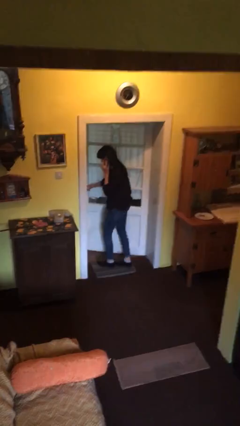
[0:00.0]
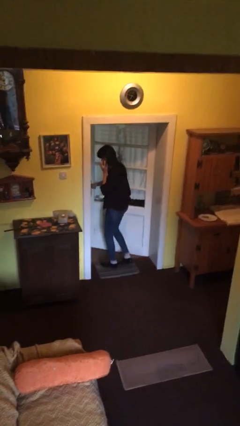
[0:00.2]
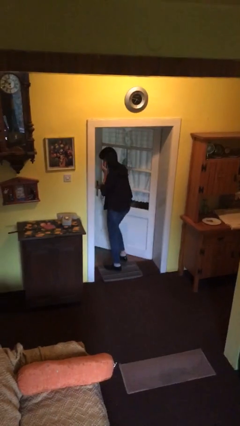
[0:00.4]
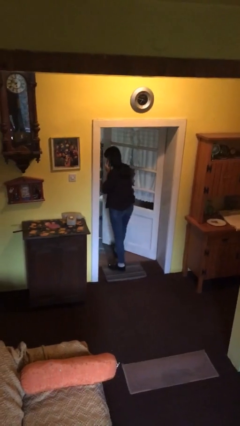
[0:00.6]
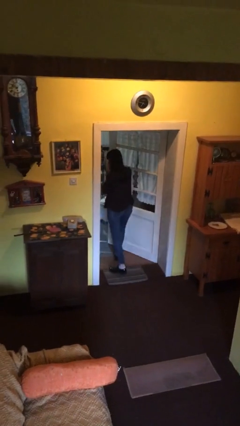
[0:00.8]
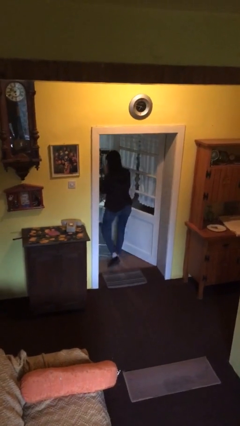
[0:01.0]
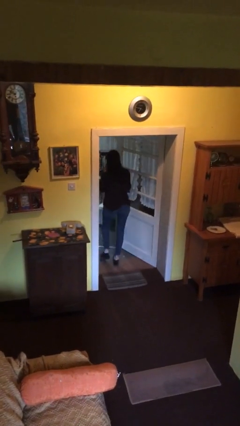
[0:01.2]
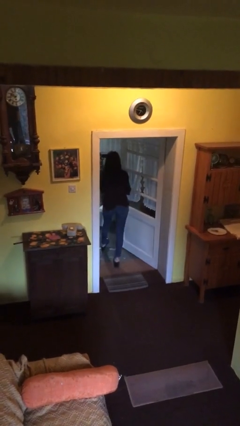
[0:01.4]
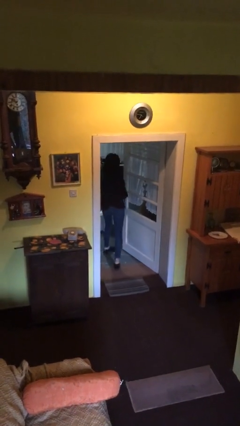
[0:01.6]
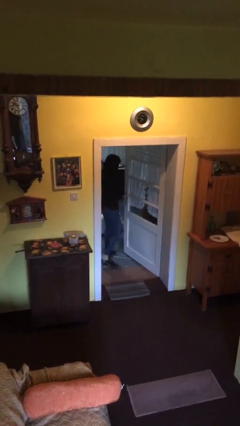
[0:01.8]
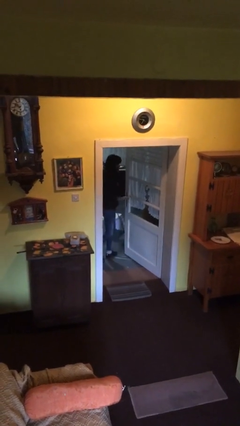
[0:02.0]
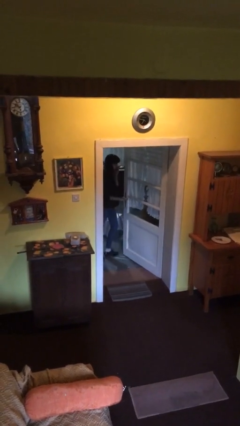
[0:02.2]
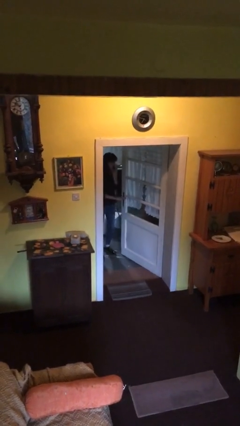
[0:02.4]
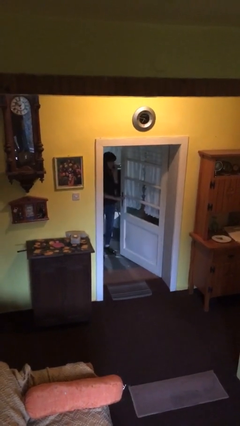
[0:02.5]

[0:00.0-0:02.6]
person exits scene through structure

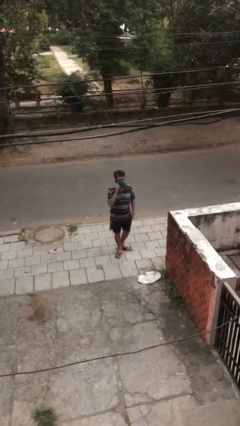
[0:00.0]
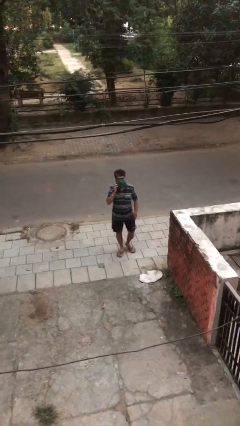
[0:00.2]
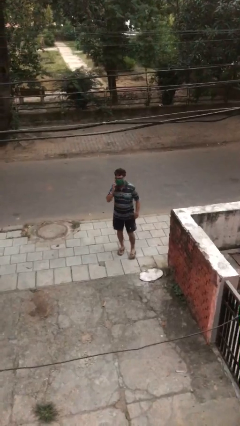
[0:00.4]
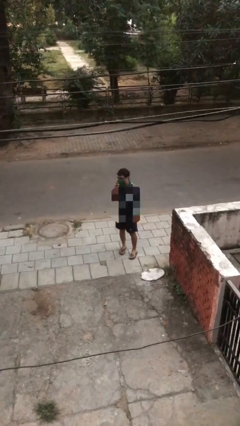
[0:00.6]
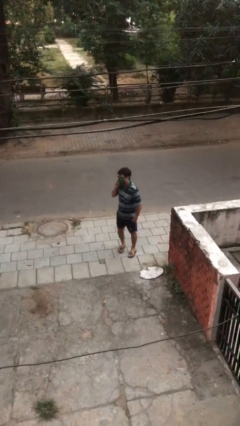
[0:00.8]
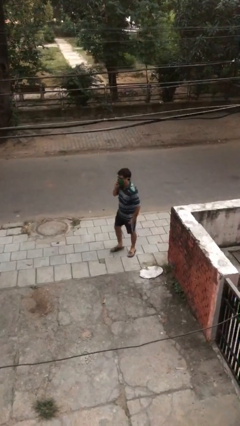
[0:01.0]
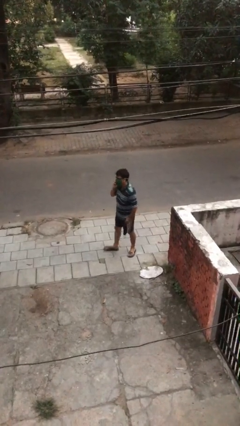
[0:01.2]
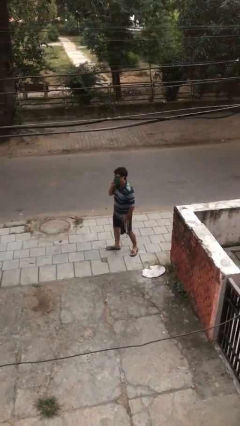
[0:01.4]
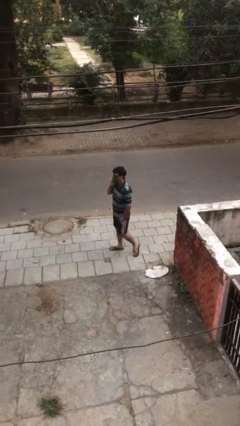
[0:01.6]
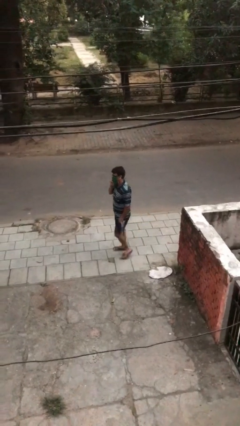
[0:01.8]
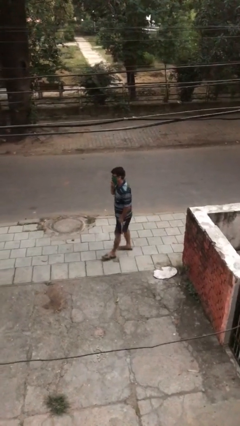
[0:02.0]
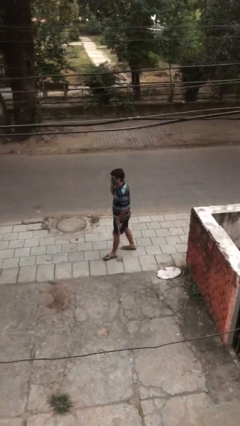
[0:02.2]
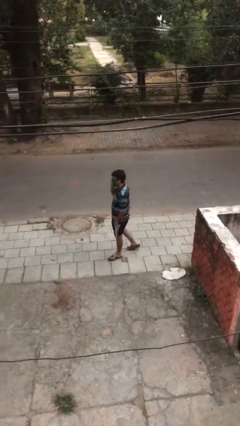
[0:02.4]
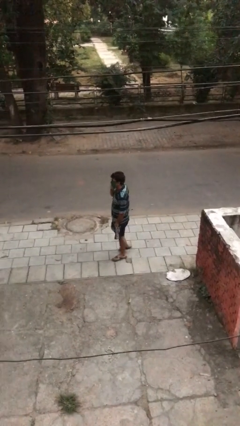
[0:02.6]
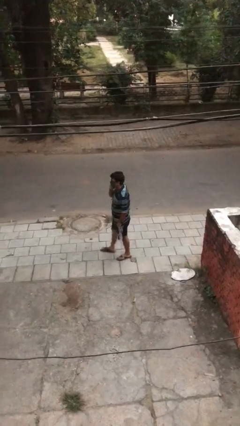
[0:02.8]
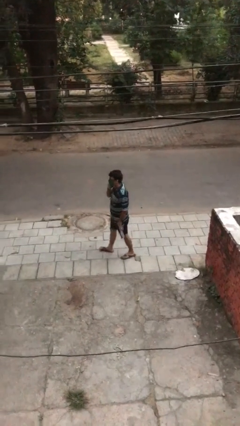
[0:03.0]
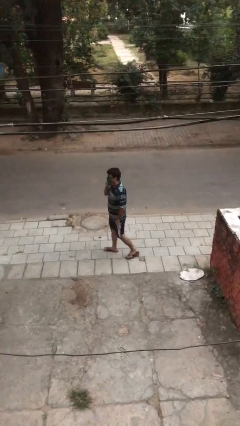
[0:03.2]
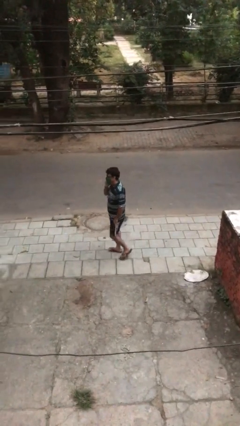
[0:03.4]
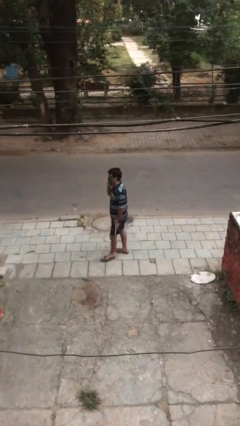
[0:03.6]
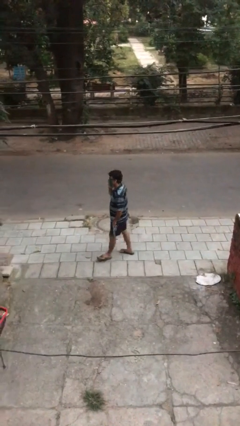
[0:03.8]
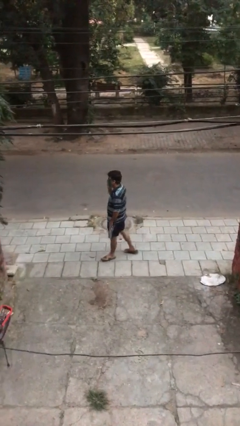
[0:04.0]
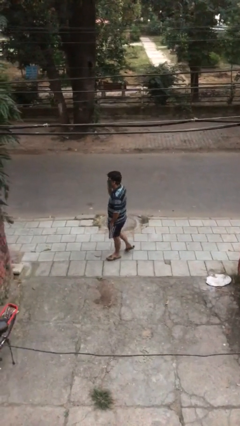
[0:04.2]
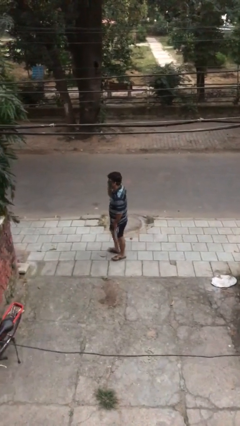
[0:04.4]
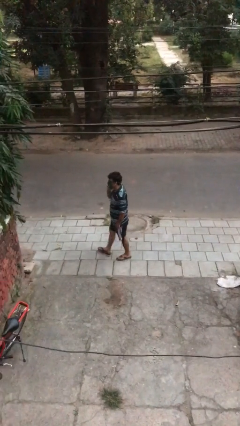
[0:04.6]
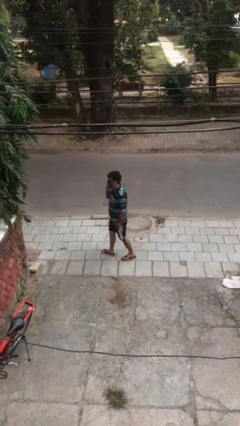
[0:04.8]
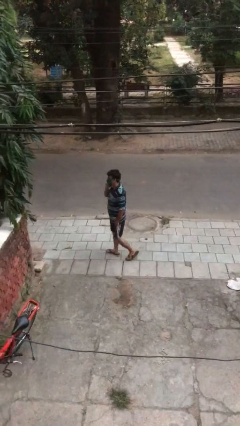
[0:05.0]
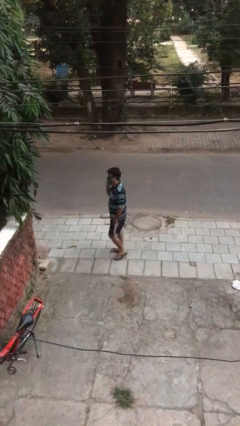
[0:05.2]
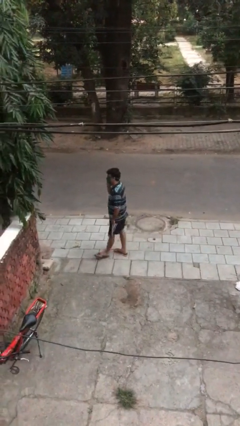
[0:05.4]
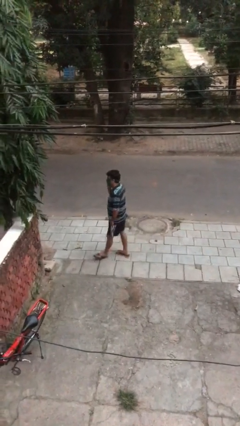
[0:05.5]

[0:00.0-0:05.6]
person talks on phone

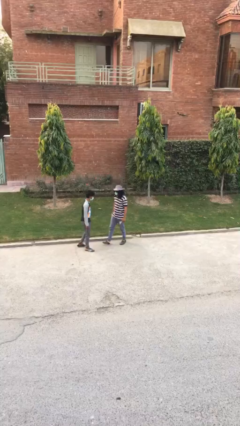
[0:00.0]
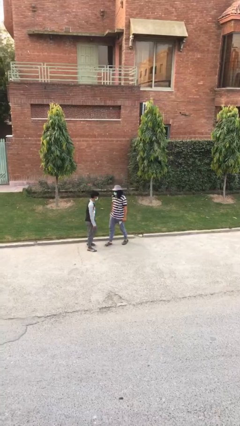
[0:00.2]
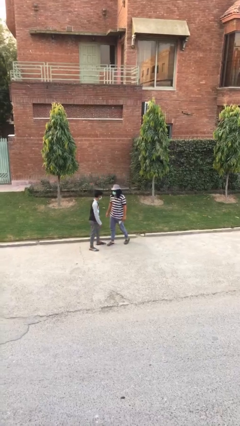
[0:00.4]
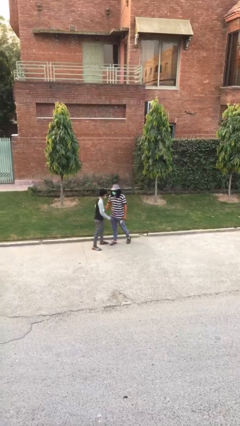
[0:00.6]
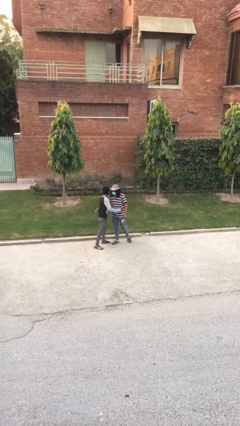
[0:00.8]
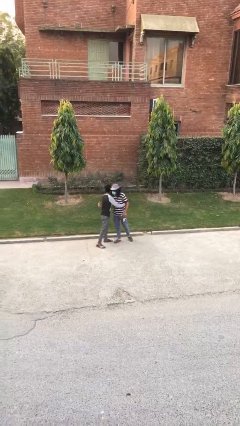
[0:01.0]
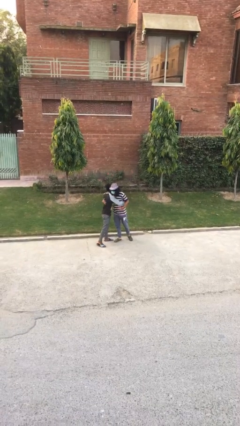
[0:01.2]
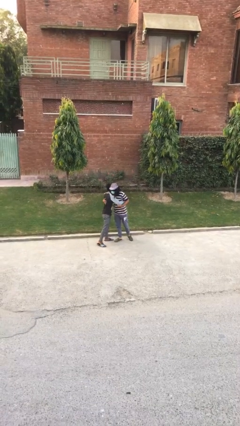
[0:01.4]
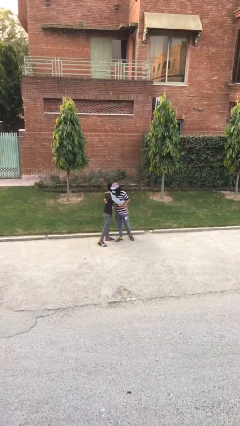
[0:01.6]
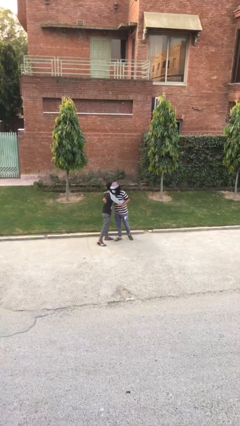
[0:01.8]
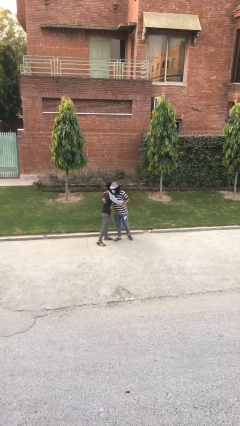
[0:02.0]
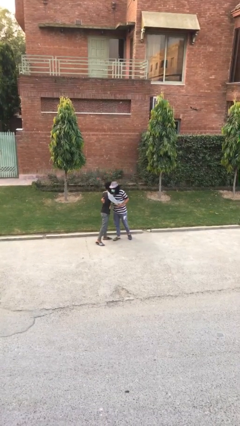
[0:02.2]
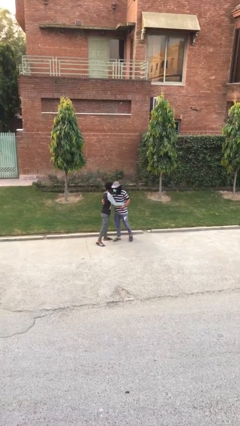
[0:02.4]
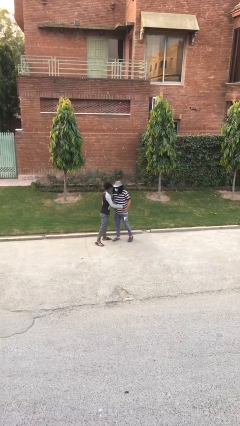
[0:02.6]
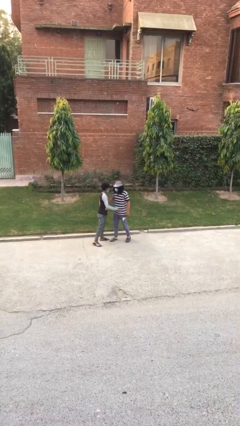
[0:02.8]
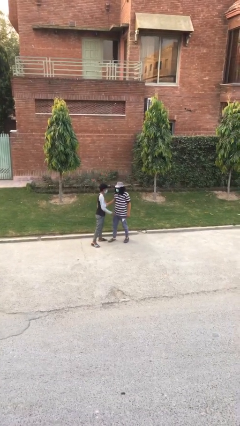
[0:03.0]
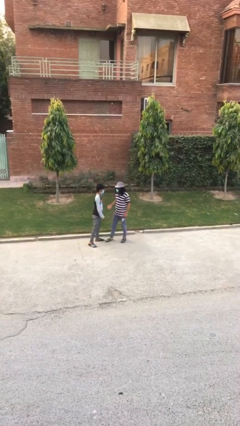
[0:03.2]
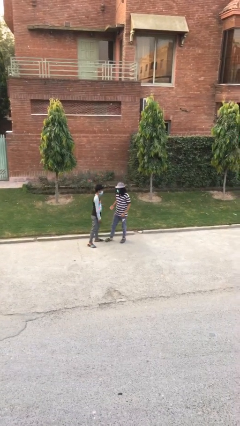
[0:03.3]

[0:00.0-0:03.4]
person embraces person

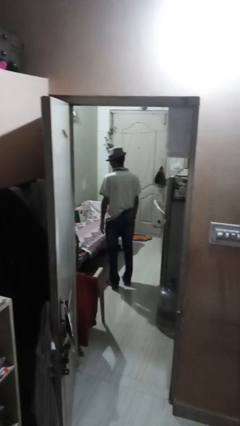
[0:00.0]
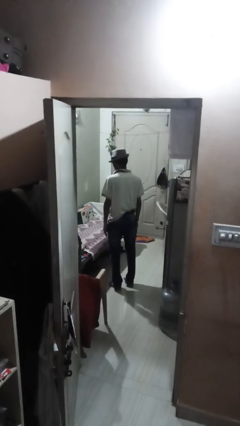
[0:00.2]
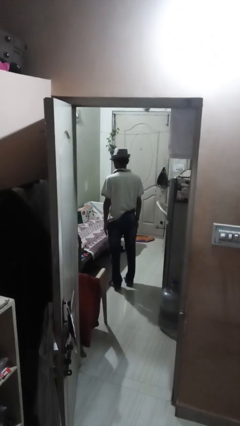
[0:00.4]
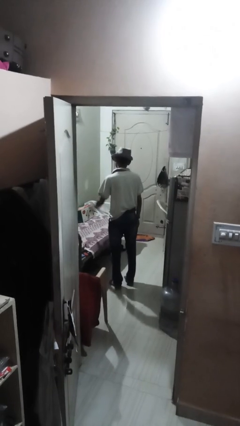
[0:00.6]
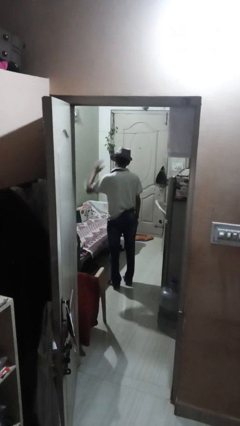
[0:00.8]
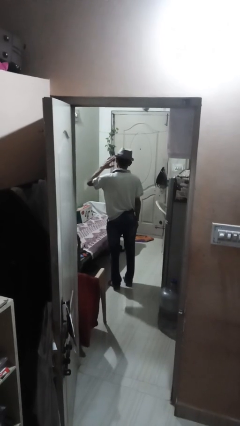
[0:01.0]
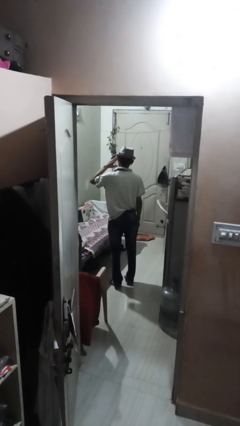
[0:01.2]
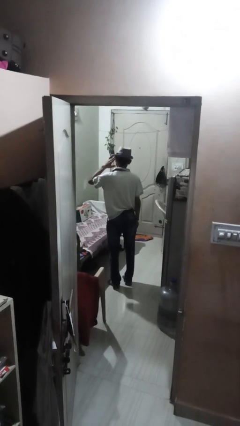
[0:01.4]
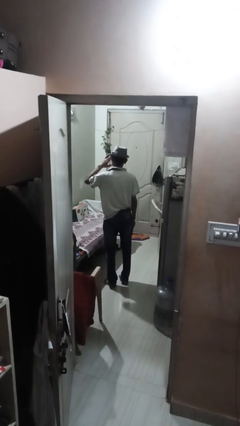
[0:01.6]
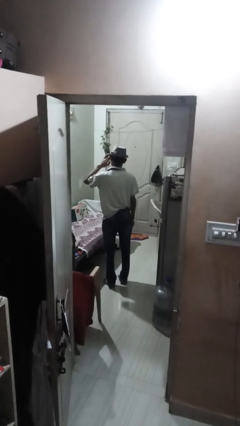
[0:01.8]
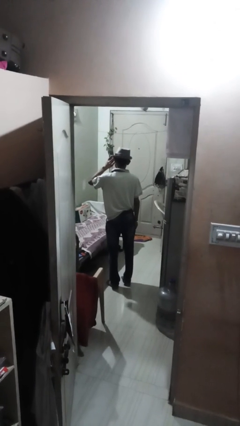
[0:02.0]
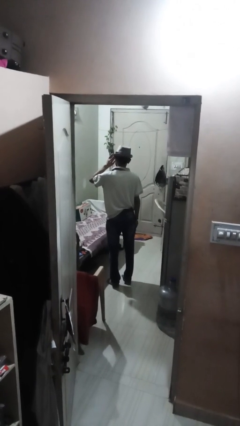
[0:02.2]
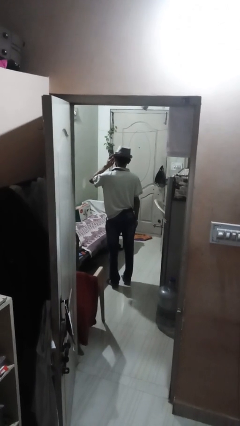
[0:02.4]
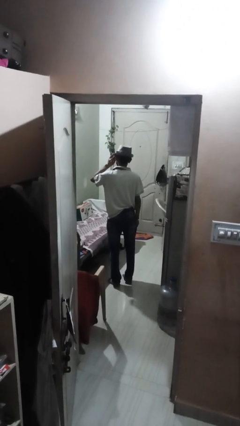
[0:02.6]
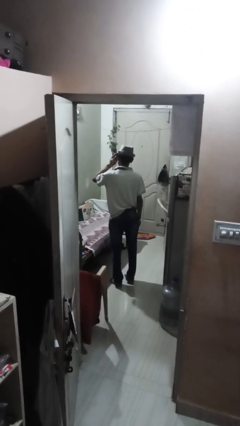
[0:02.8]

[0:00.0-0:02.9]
person salutes

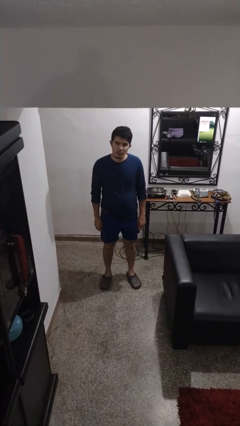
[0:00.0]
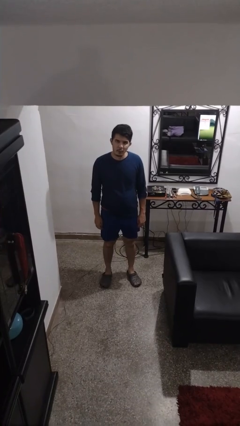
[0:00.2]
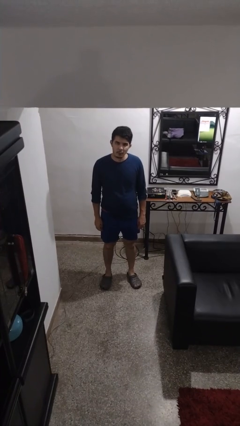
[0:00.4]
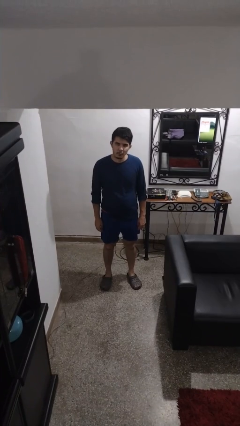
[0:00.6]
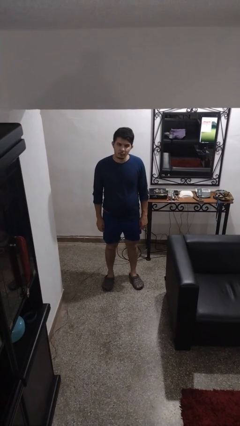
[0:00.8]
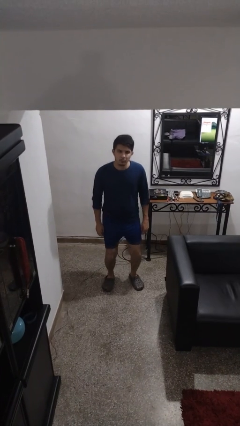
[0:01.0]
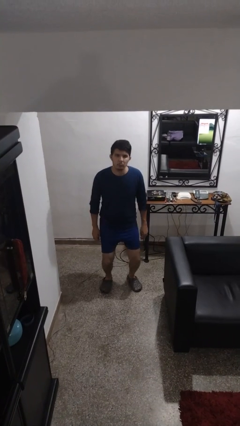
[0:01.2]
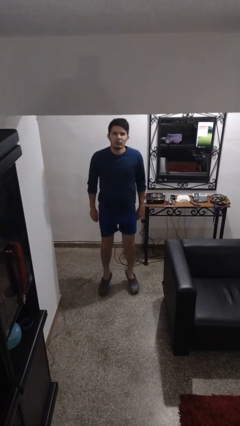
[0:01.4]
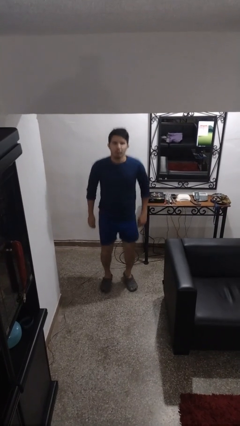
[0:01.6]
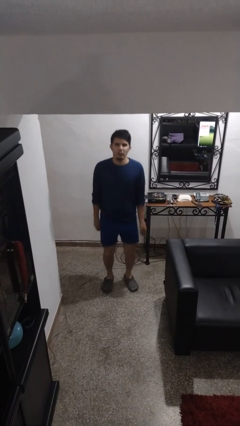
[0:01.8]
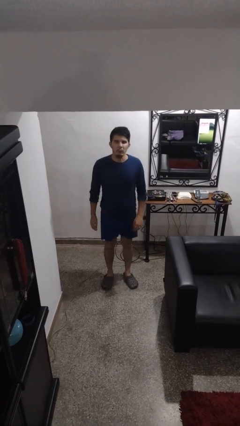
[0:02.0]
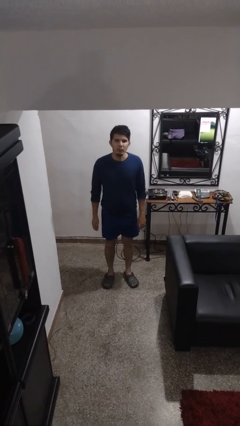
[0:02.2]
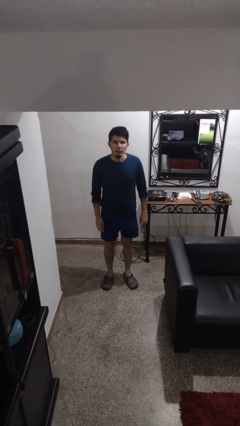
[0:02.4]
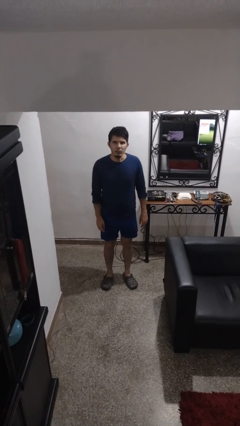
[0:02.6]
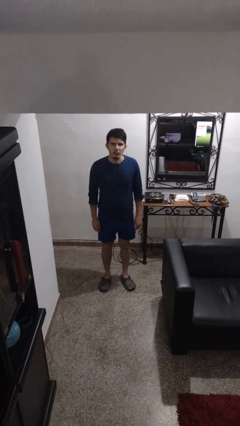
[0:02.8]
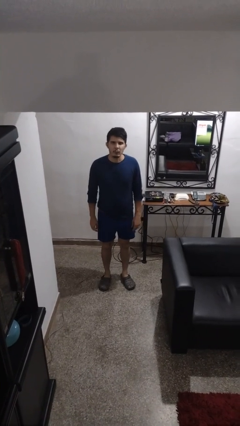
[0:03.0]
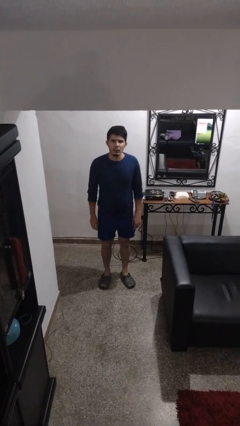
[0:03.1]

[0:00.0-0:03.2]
person jumps
